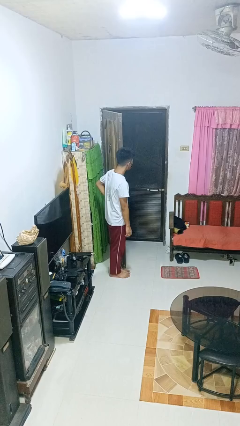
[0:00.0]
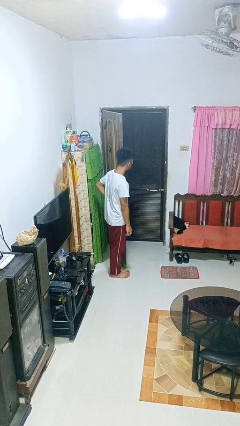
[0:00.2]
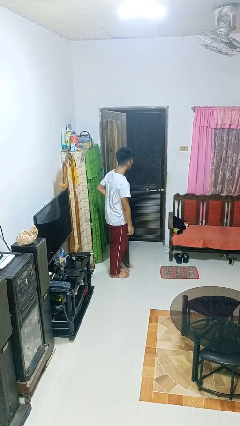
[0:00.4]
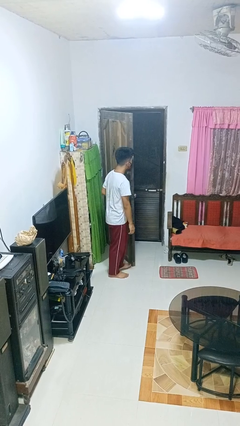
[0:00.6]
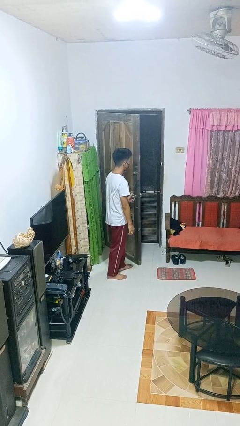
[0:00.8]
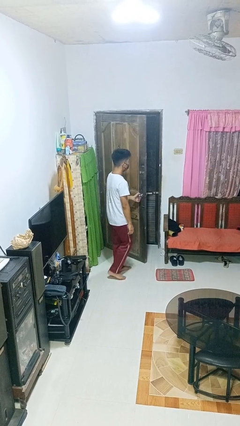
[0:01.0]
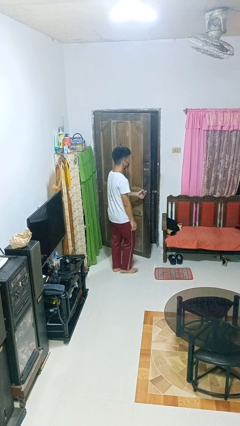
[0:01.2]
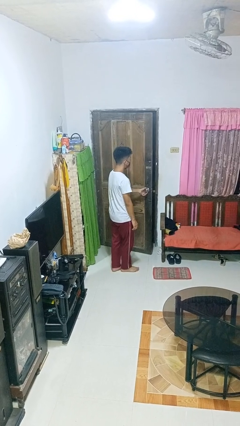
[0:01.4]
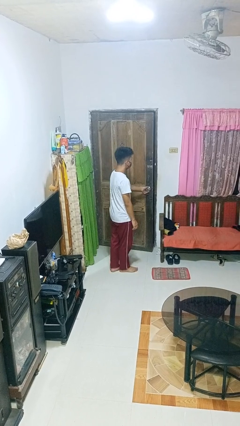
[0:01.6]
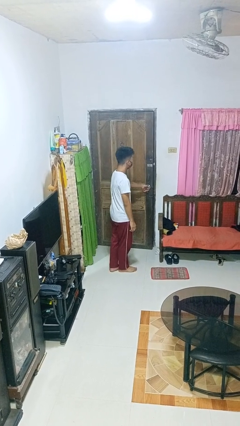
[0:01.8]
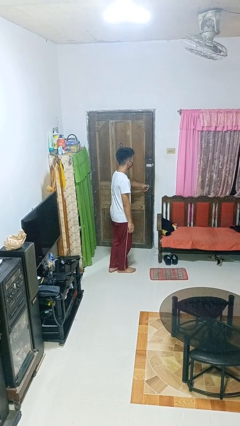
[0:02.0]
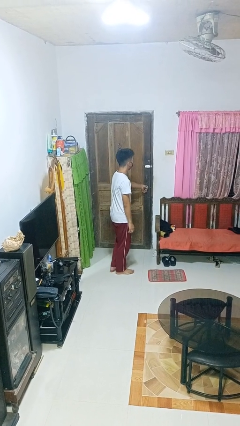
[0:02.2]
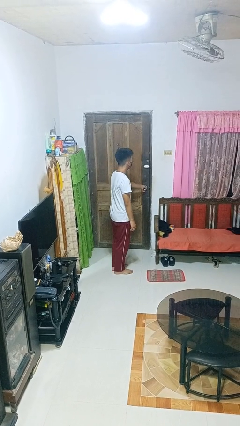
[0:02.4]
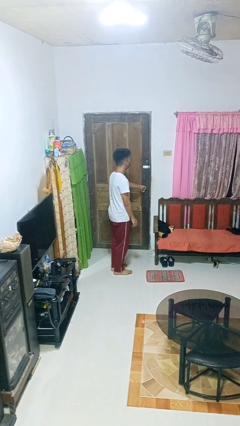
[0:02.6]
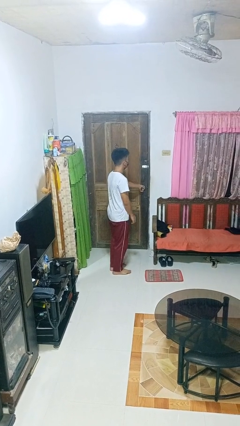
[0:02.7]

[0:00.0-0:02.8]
person closes facility door

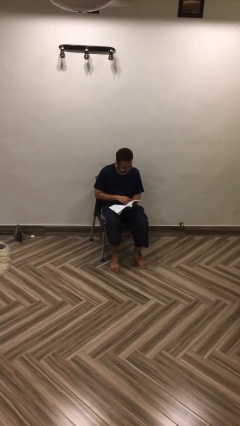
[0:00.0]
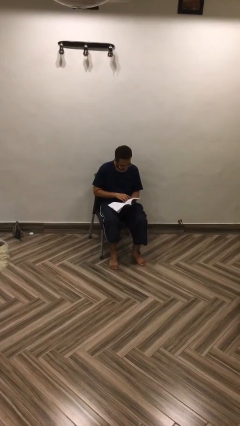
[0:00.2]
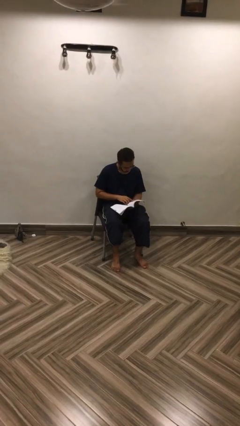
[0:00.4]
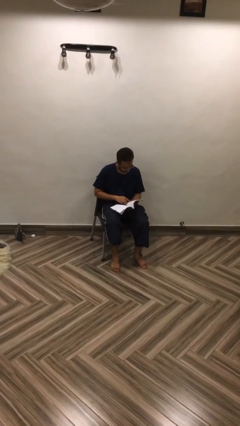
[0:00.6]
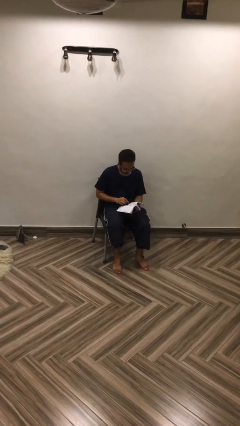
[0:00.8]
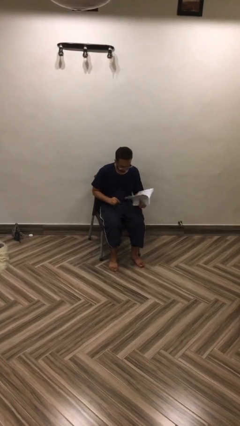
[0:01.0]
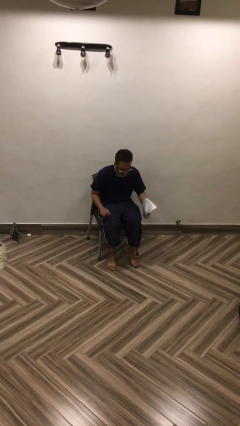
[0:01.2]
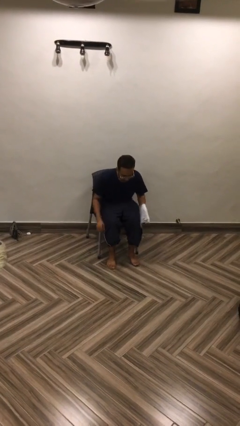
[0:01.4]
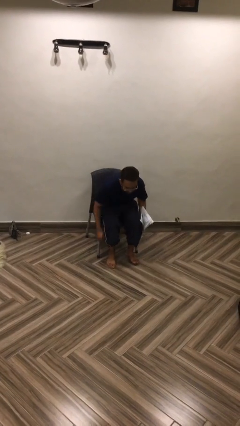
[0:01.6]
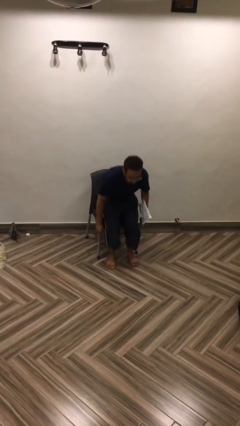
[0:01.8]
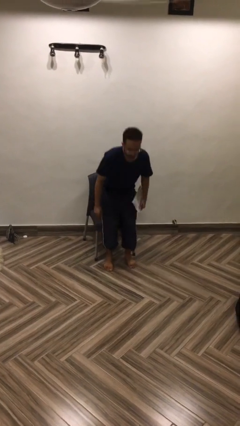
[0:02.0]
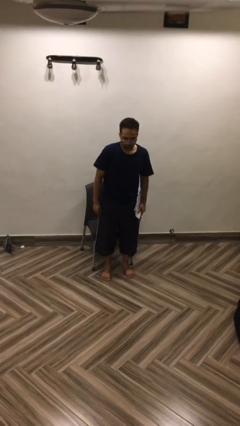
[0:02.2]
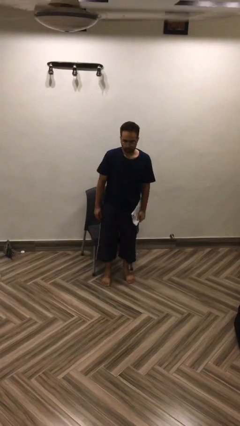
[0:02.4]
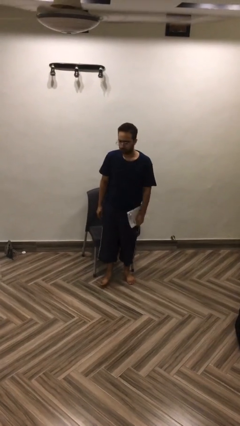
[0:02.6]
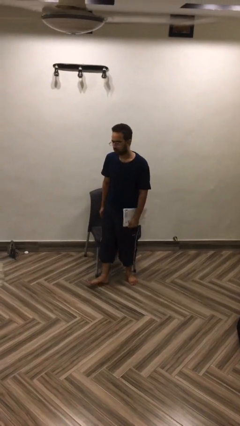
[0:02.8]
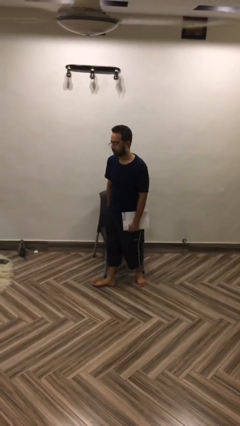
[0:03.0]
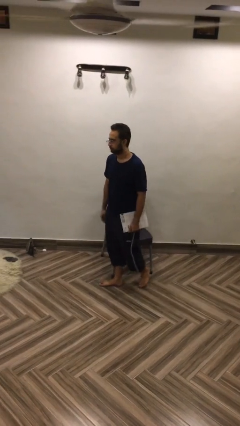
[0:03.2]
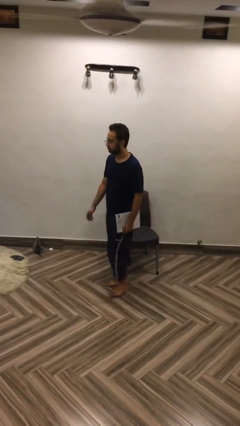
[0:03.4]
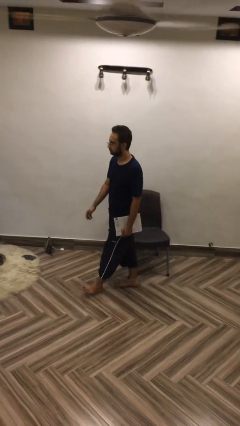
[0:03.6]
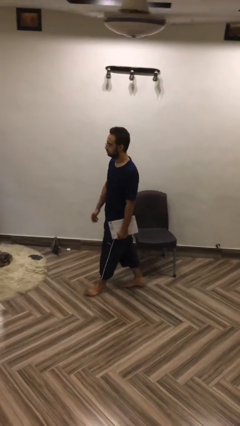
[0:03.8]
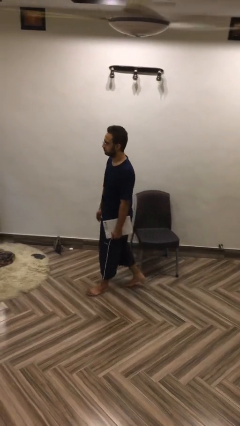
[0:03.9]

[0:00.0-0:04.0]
person stands up

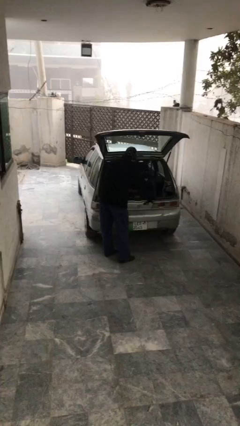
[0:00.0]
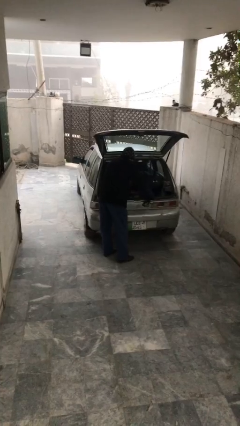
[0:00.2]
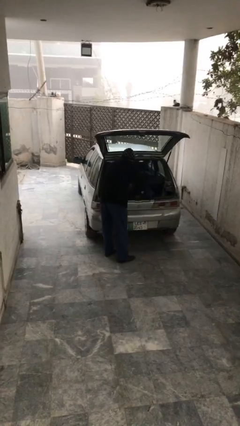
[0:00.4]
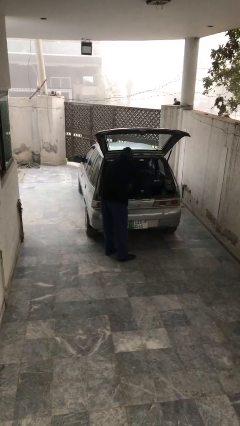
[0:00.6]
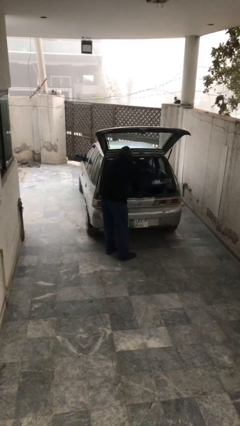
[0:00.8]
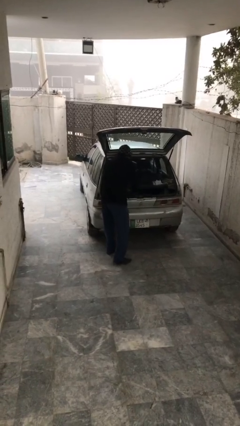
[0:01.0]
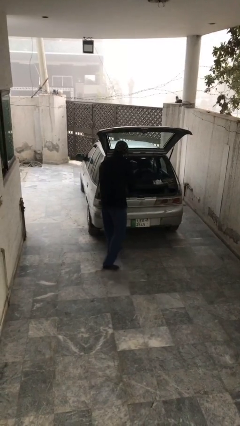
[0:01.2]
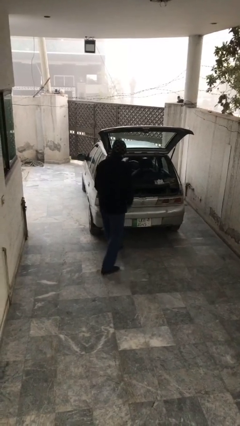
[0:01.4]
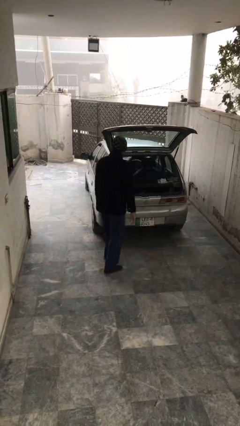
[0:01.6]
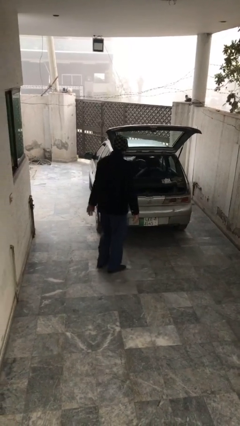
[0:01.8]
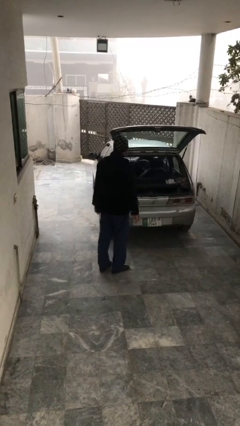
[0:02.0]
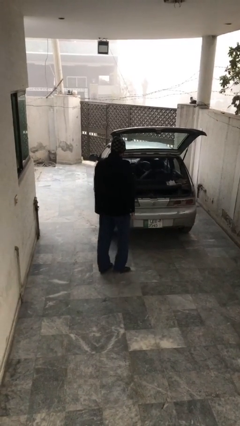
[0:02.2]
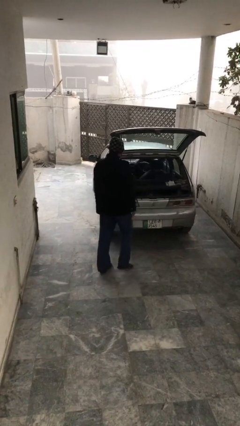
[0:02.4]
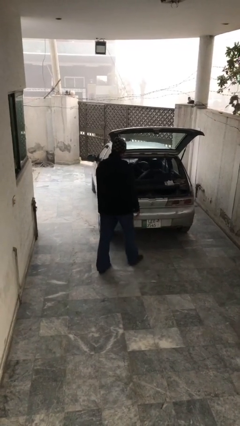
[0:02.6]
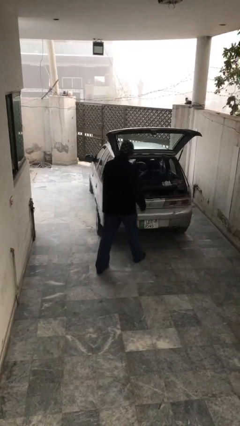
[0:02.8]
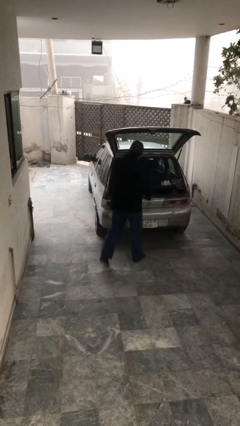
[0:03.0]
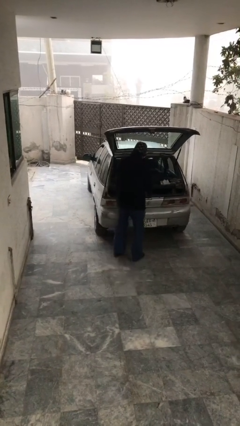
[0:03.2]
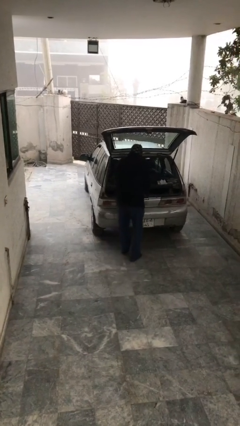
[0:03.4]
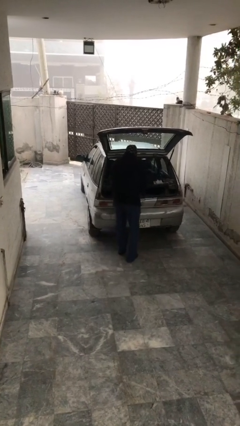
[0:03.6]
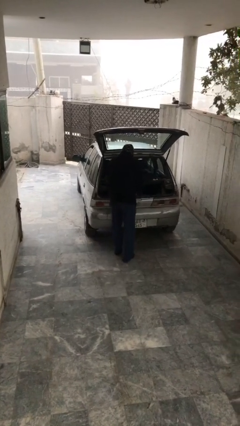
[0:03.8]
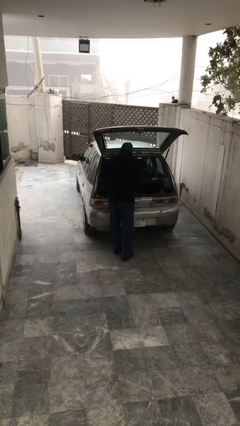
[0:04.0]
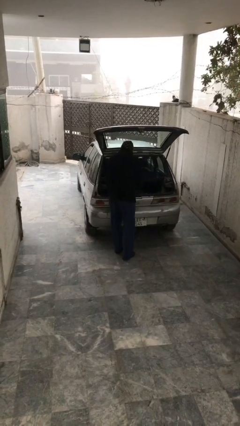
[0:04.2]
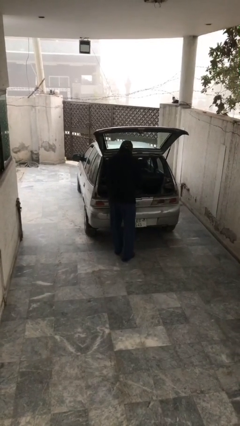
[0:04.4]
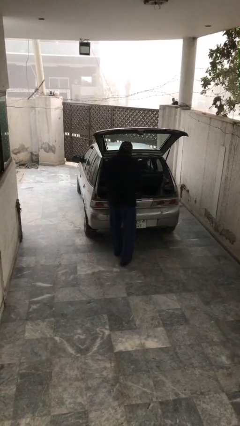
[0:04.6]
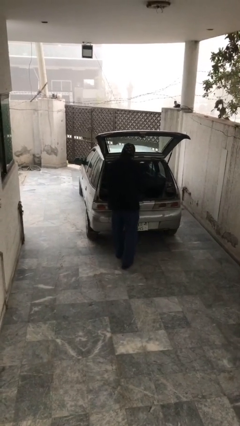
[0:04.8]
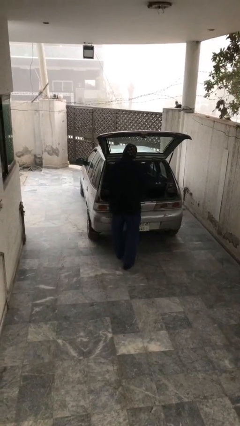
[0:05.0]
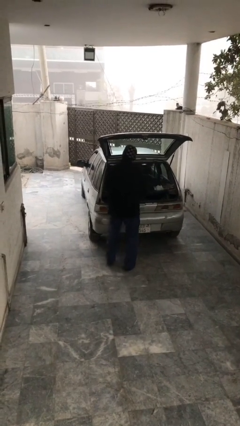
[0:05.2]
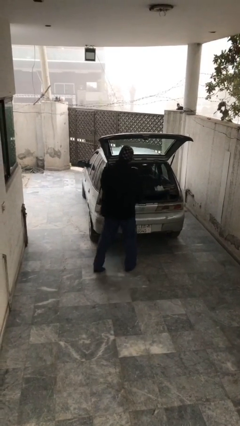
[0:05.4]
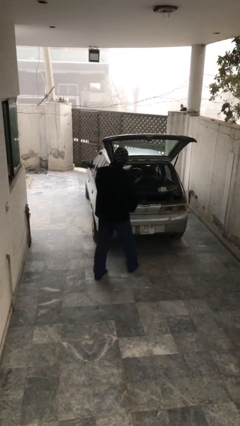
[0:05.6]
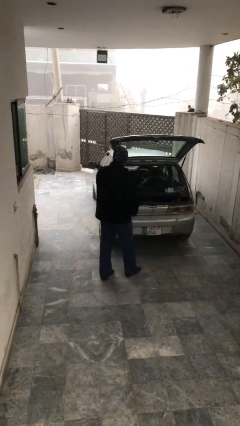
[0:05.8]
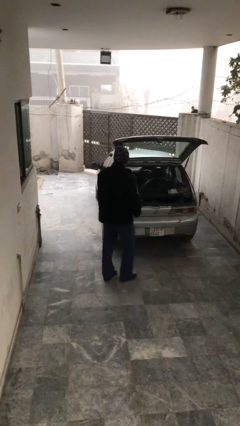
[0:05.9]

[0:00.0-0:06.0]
person unloads car

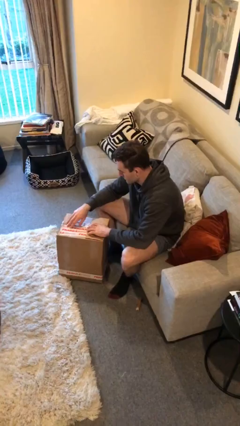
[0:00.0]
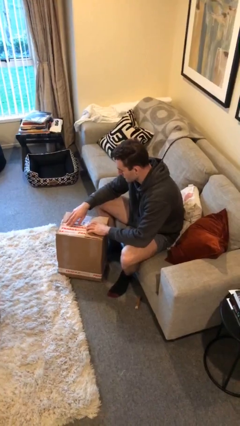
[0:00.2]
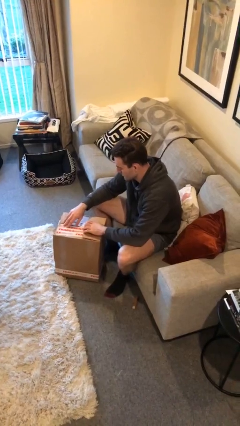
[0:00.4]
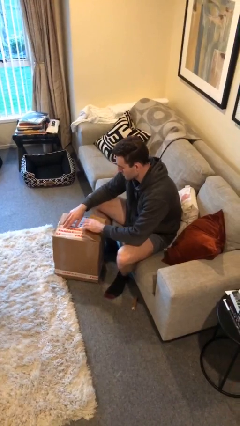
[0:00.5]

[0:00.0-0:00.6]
person opens box

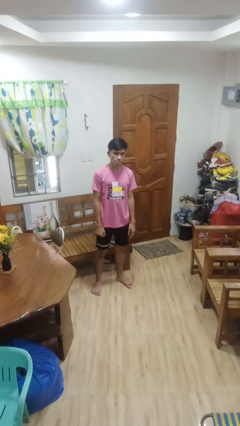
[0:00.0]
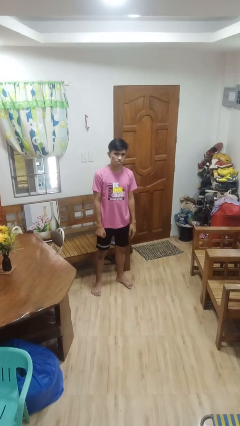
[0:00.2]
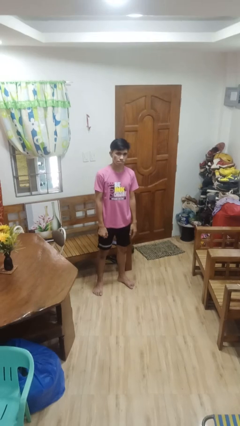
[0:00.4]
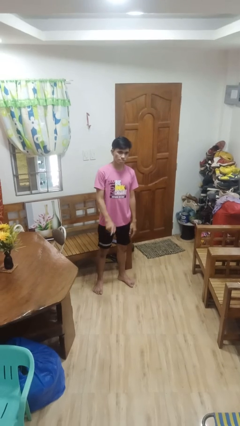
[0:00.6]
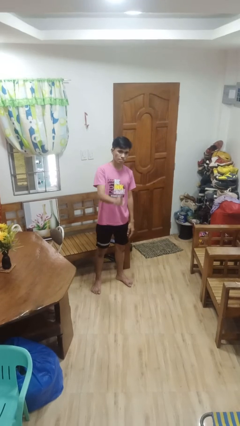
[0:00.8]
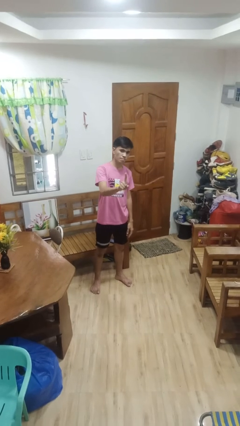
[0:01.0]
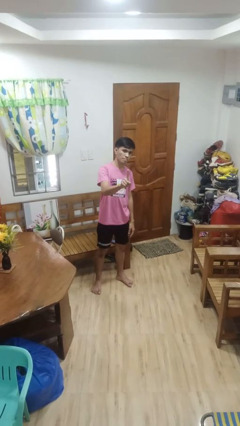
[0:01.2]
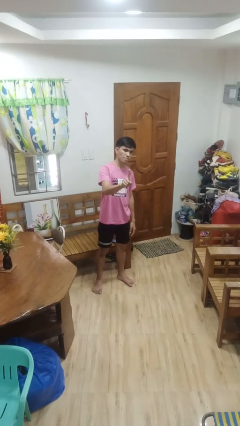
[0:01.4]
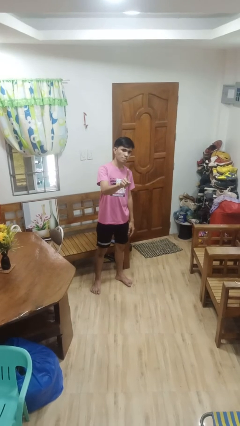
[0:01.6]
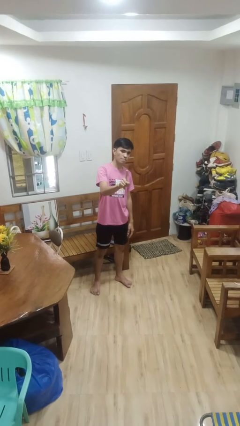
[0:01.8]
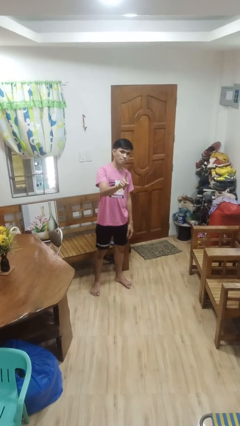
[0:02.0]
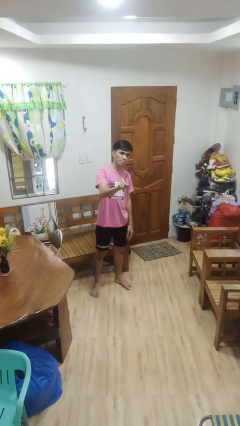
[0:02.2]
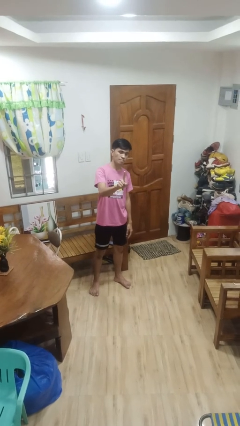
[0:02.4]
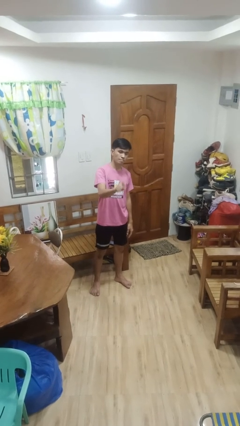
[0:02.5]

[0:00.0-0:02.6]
person gestures number one

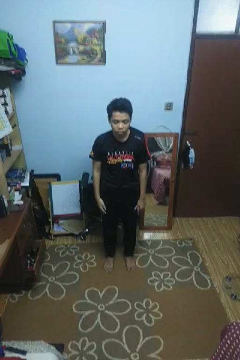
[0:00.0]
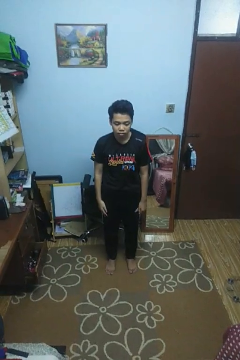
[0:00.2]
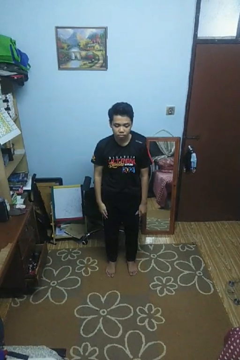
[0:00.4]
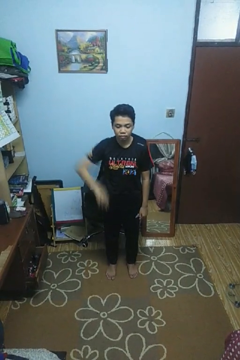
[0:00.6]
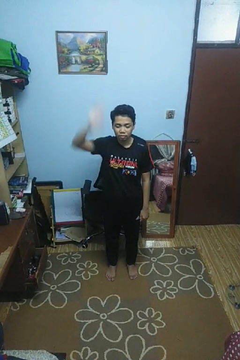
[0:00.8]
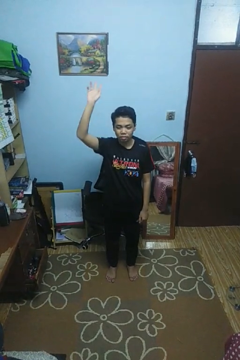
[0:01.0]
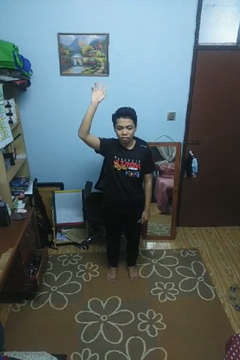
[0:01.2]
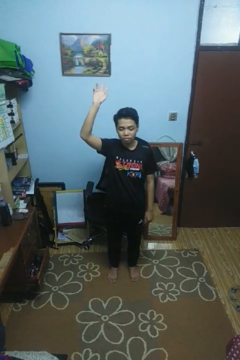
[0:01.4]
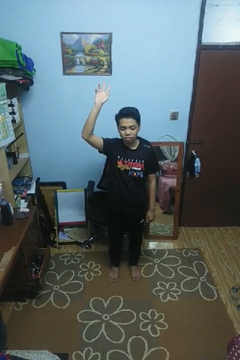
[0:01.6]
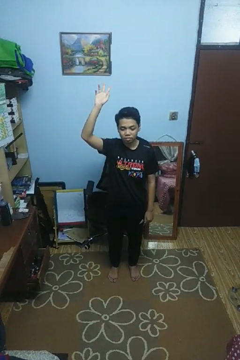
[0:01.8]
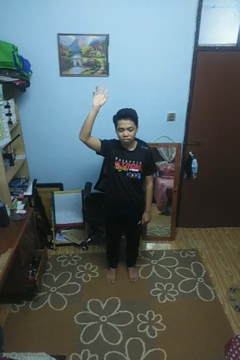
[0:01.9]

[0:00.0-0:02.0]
person gestures raise hand
